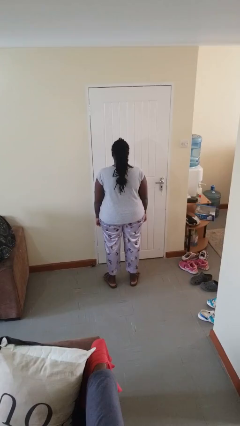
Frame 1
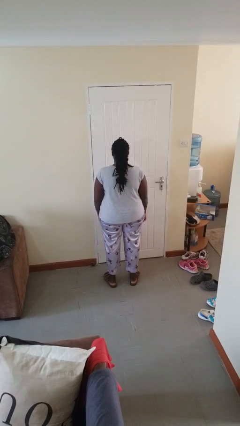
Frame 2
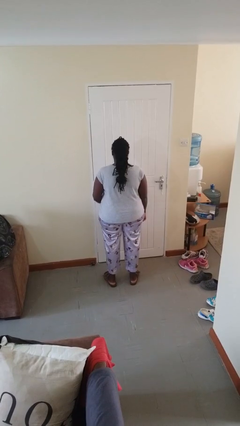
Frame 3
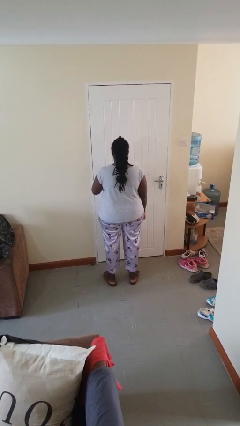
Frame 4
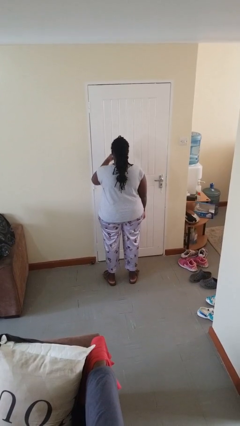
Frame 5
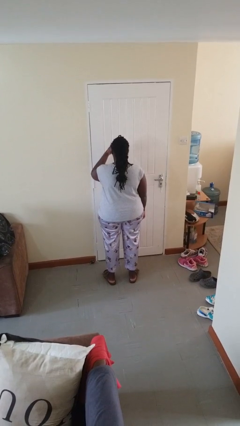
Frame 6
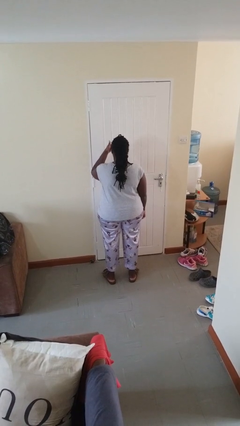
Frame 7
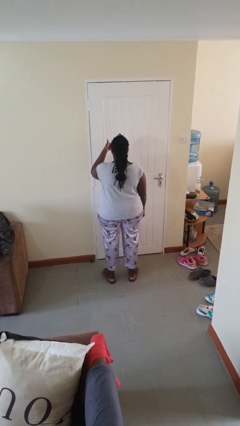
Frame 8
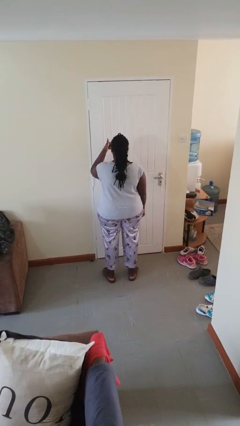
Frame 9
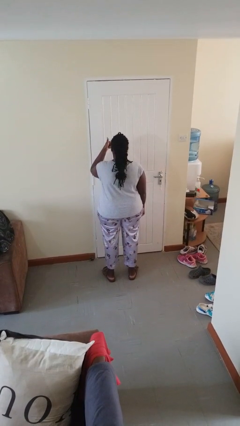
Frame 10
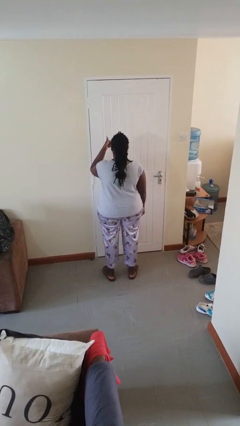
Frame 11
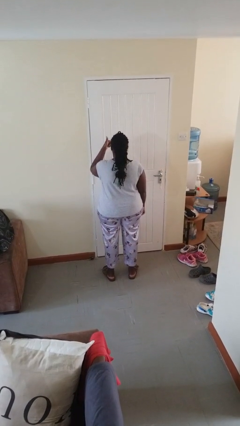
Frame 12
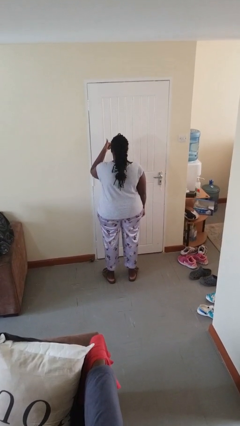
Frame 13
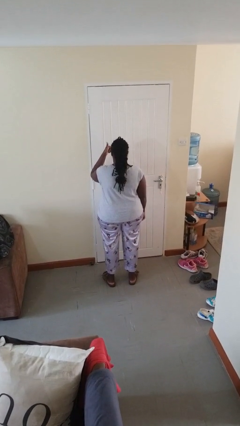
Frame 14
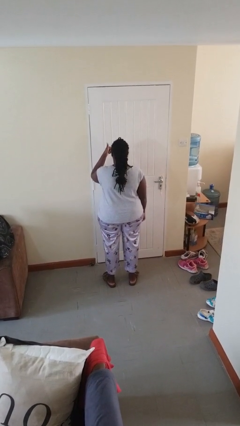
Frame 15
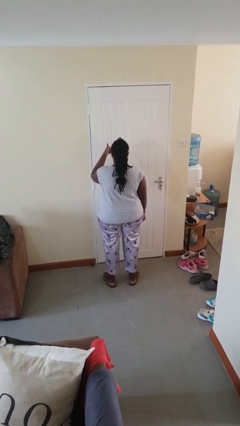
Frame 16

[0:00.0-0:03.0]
person gestures thumbs up

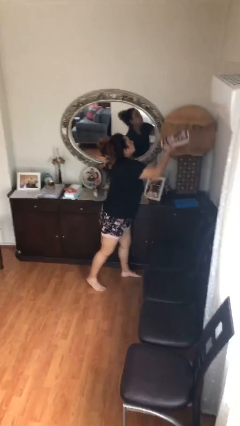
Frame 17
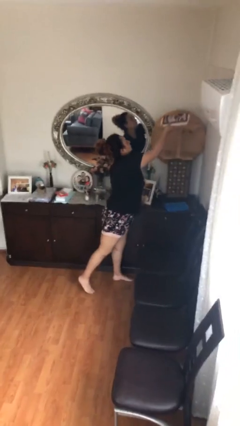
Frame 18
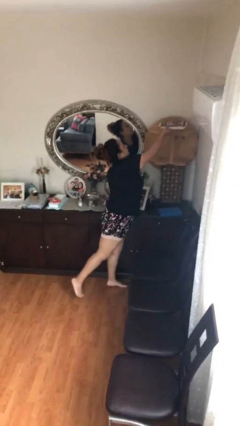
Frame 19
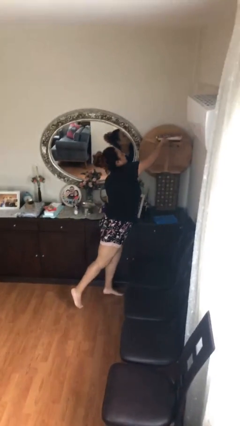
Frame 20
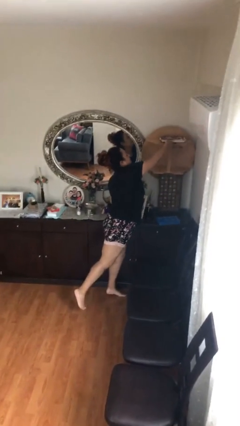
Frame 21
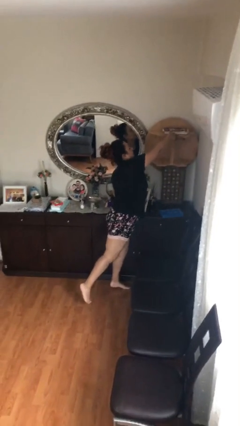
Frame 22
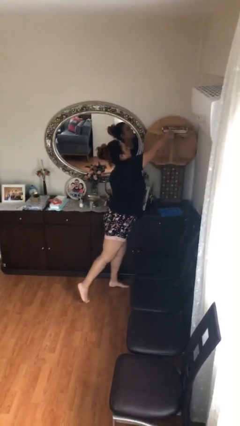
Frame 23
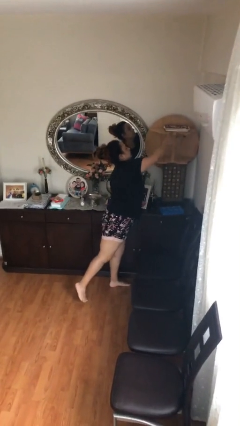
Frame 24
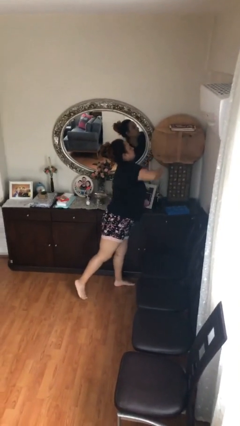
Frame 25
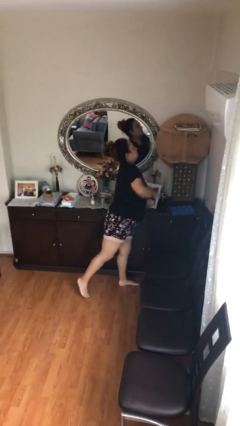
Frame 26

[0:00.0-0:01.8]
person puts down object on shelf

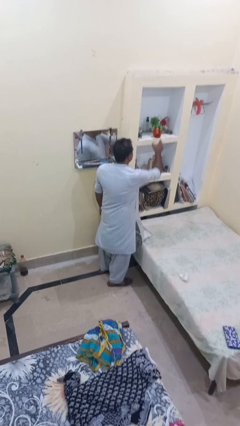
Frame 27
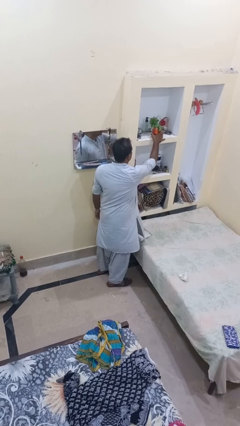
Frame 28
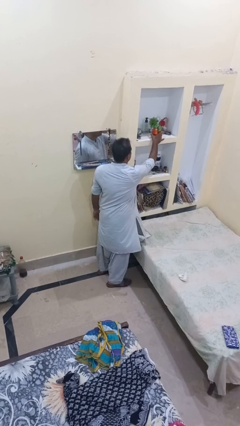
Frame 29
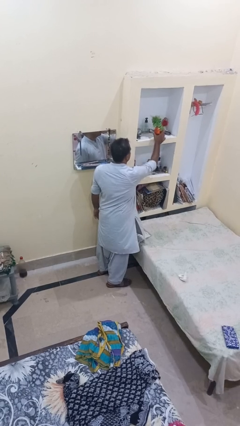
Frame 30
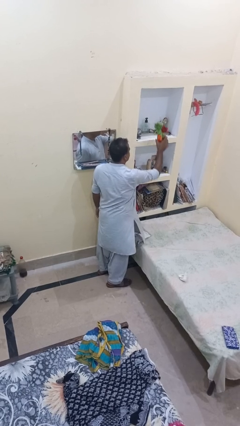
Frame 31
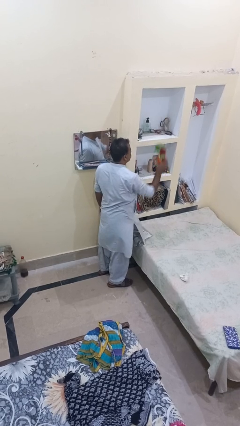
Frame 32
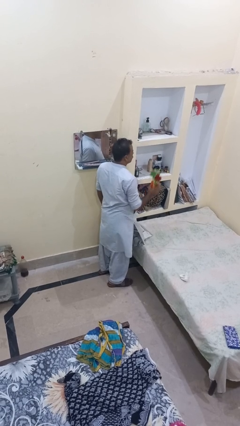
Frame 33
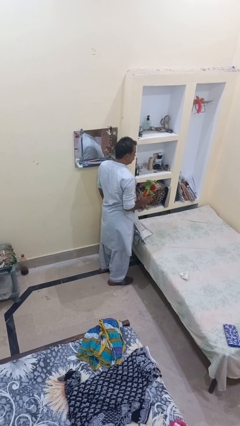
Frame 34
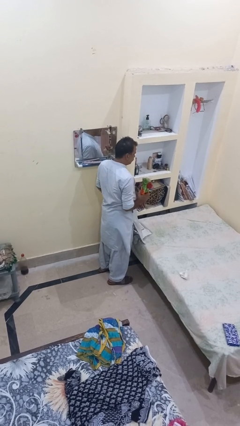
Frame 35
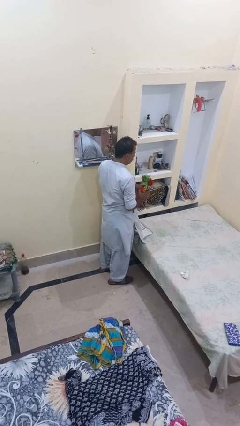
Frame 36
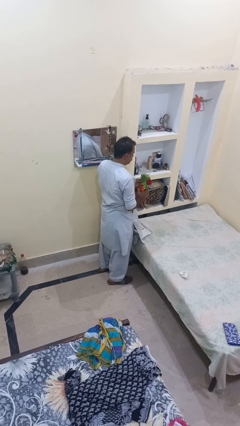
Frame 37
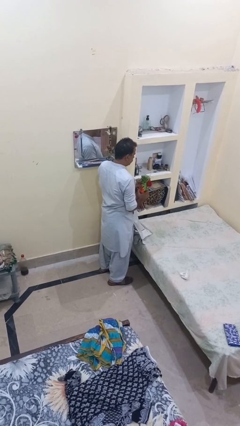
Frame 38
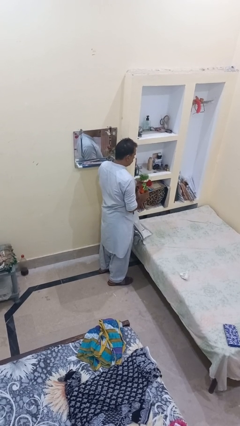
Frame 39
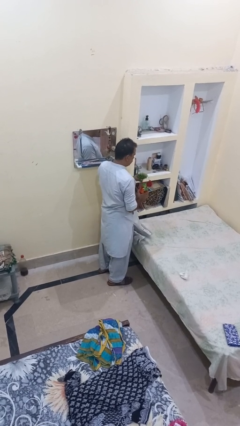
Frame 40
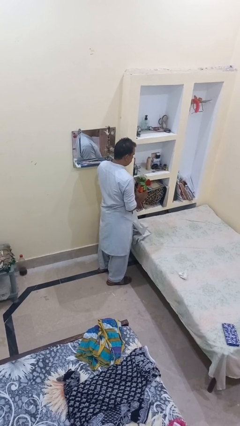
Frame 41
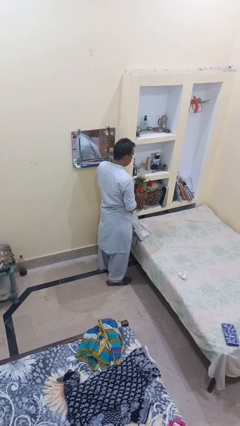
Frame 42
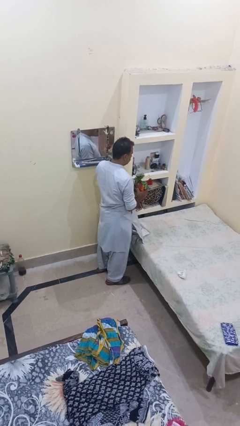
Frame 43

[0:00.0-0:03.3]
person picks up object from shelf

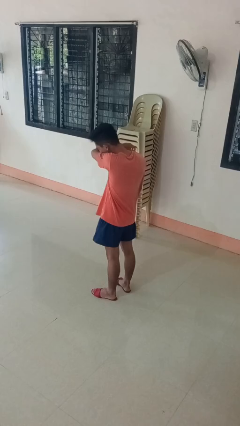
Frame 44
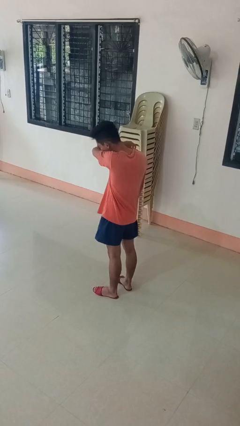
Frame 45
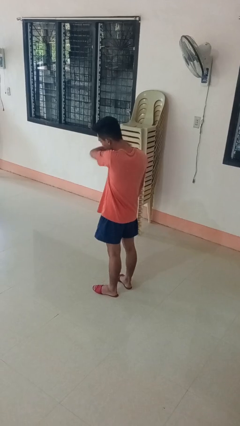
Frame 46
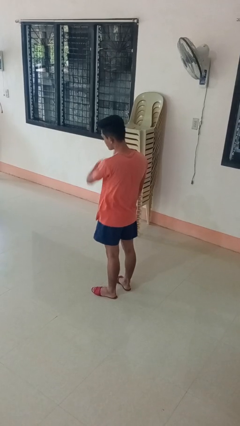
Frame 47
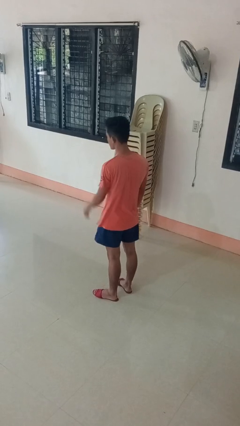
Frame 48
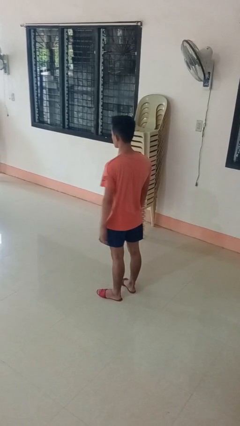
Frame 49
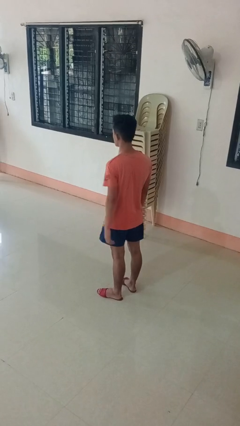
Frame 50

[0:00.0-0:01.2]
person sneezes into arm

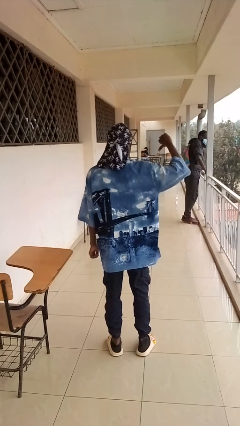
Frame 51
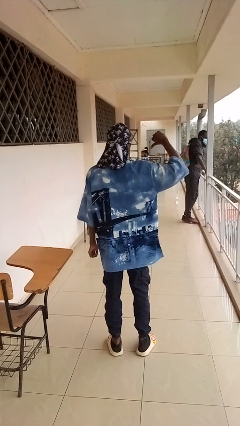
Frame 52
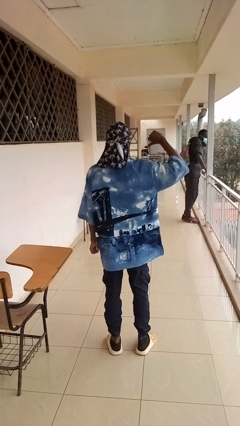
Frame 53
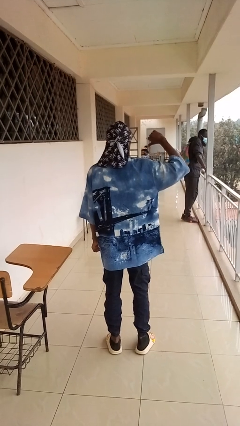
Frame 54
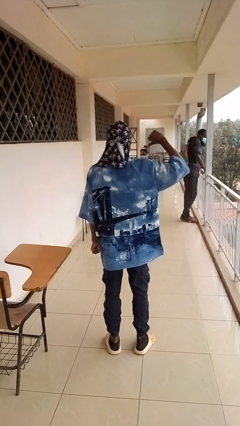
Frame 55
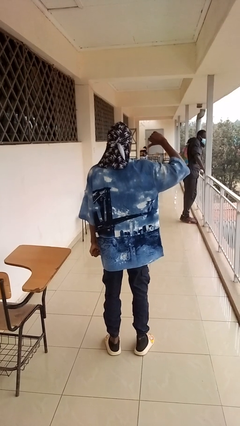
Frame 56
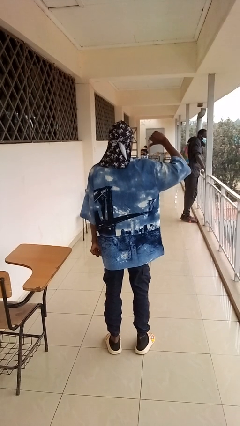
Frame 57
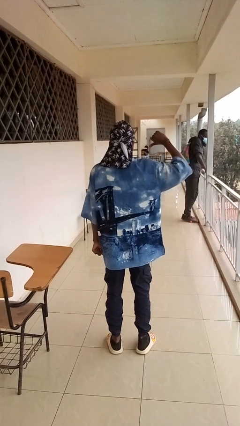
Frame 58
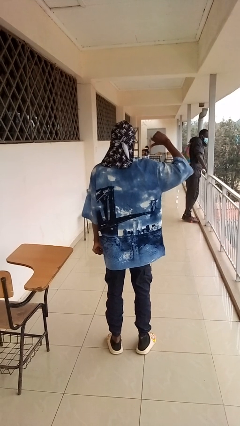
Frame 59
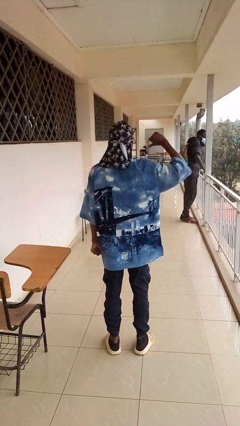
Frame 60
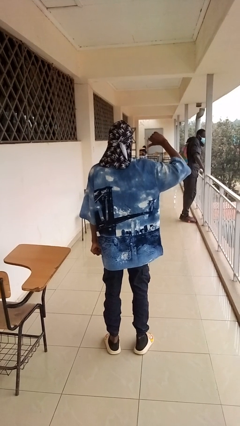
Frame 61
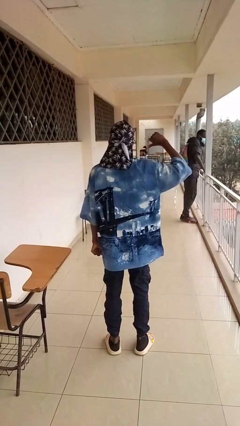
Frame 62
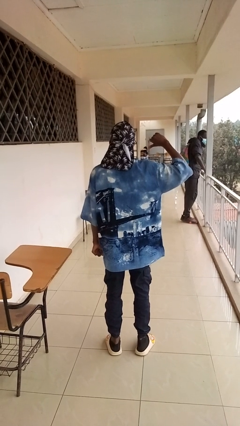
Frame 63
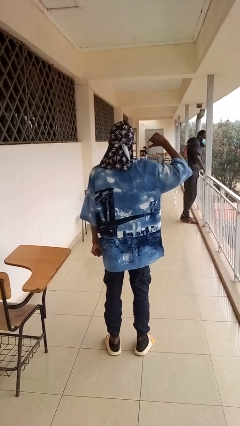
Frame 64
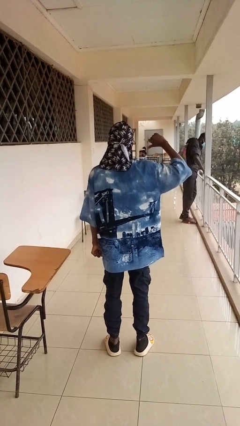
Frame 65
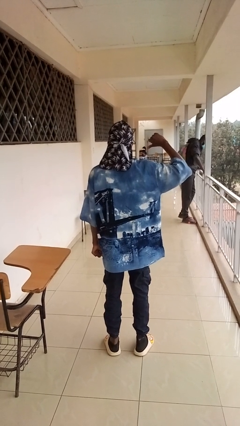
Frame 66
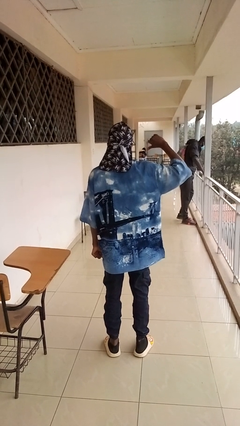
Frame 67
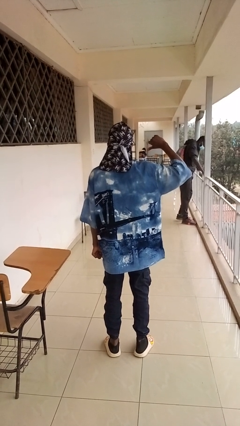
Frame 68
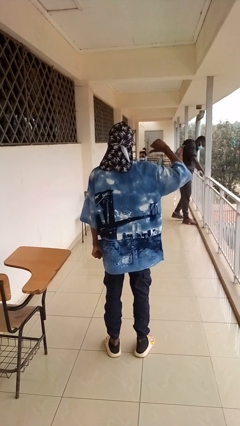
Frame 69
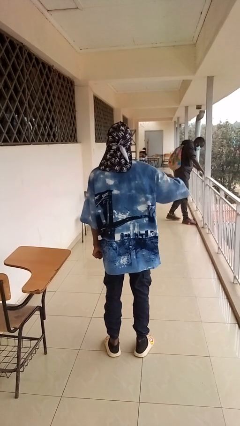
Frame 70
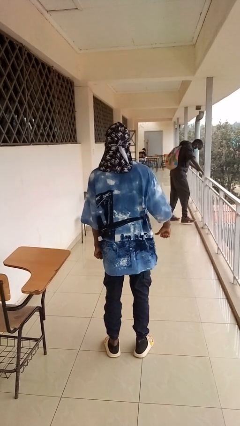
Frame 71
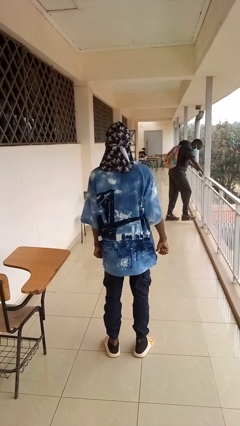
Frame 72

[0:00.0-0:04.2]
person gestures thumbs down

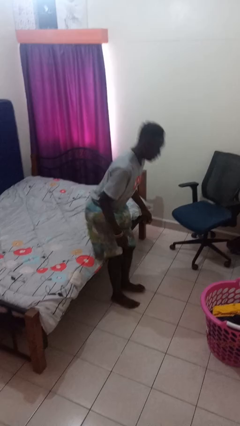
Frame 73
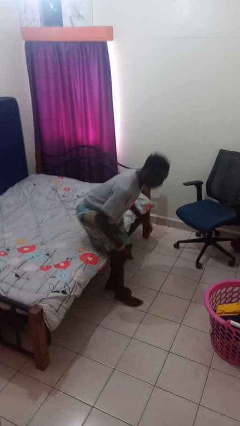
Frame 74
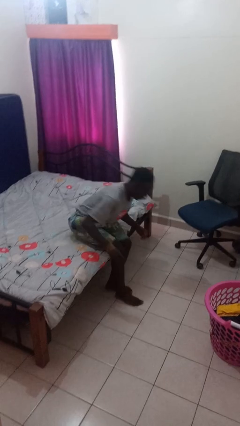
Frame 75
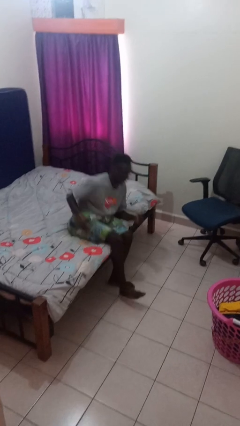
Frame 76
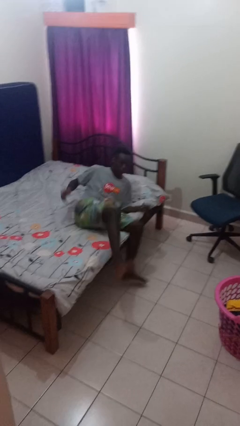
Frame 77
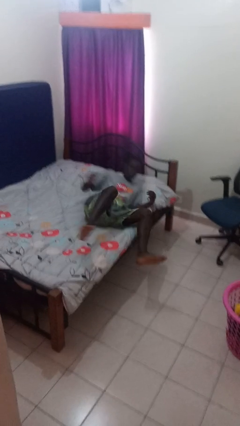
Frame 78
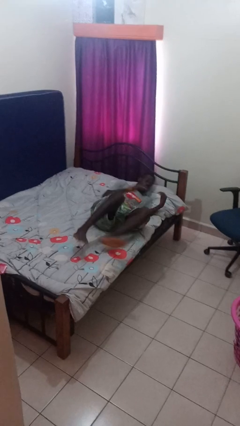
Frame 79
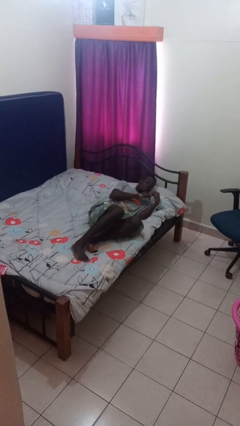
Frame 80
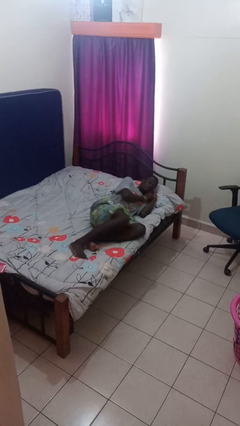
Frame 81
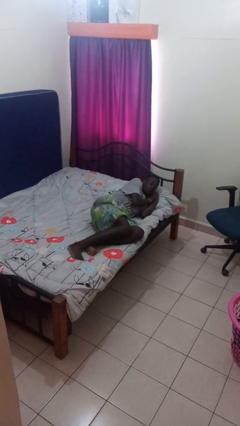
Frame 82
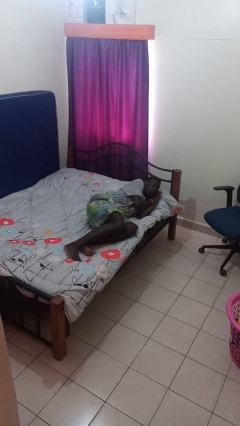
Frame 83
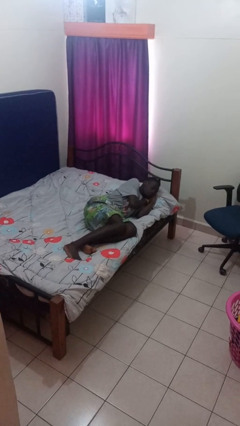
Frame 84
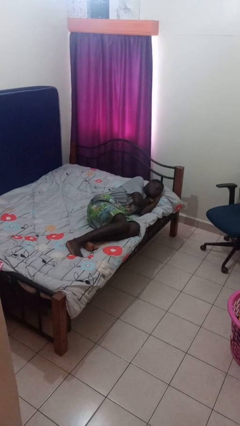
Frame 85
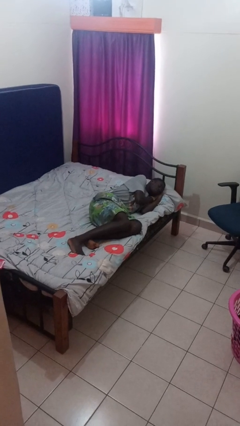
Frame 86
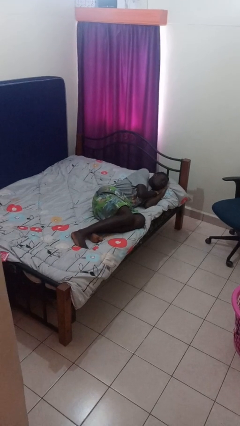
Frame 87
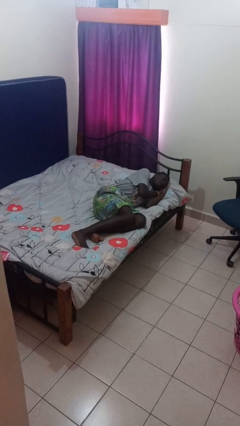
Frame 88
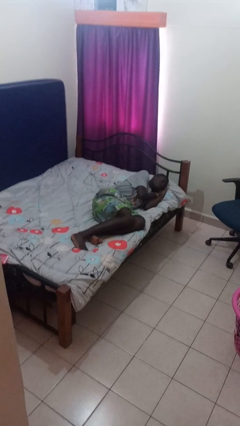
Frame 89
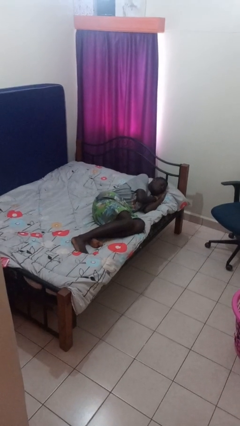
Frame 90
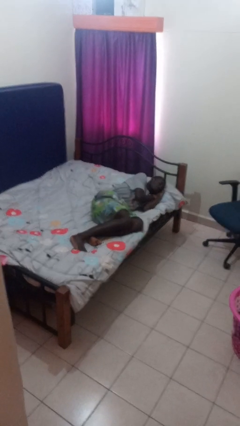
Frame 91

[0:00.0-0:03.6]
person lies down on bed

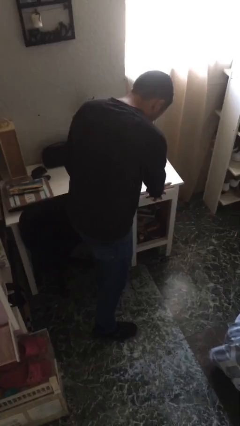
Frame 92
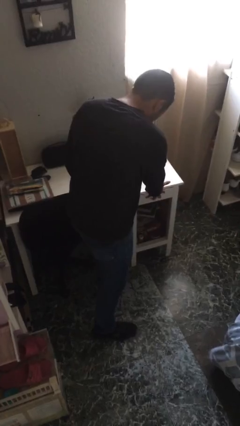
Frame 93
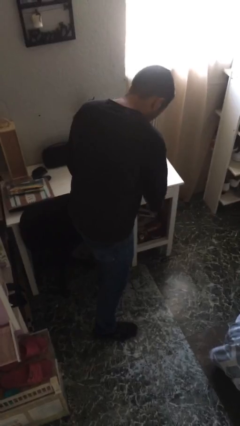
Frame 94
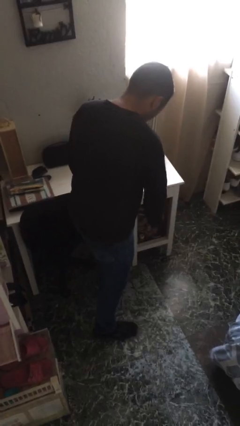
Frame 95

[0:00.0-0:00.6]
person closes dresser drawer
